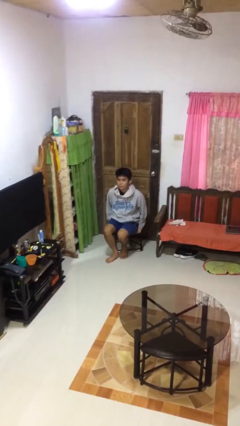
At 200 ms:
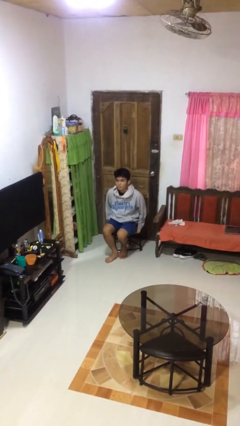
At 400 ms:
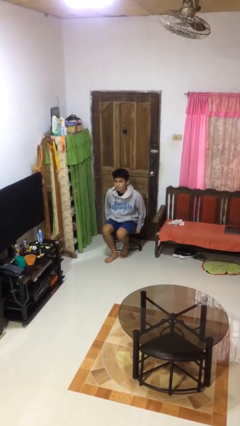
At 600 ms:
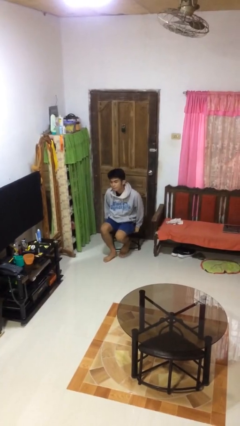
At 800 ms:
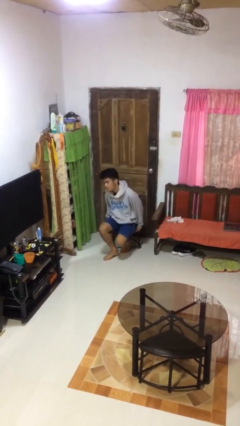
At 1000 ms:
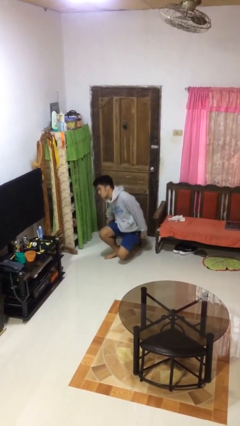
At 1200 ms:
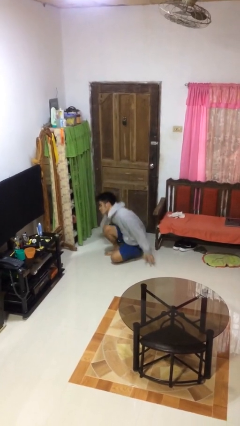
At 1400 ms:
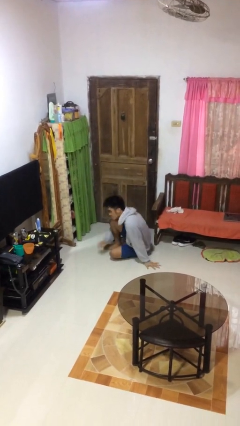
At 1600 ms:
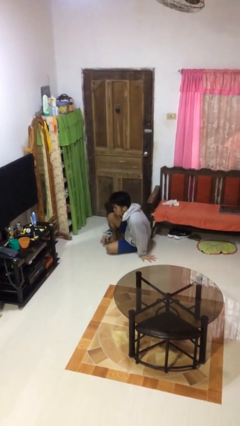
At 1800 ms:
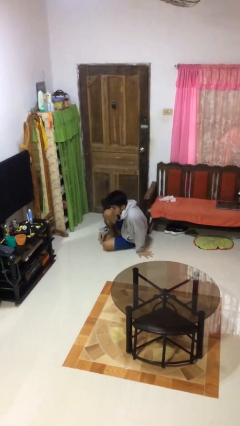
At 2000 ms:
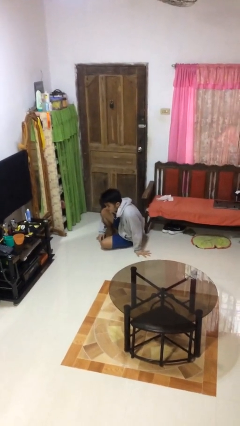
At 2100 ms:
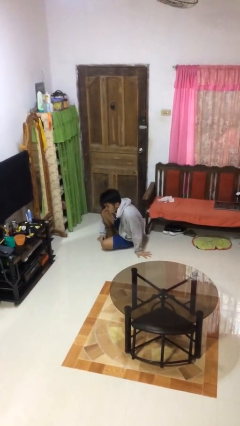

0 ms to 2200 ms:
person falls from chair

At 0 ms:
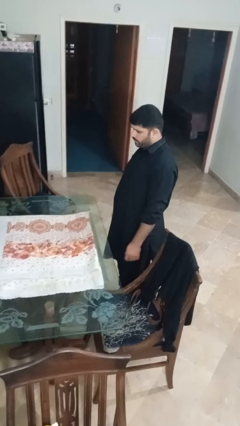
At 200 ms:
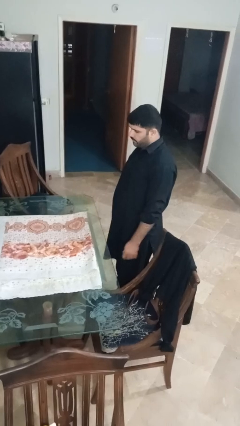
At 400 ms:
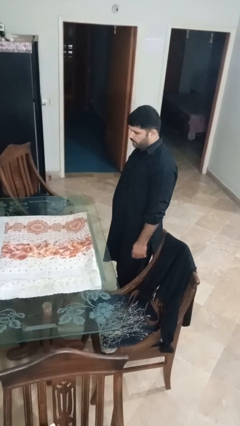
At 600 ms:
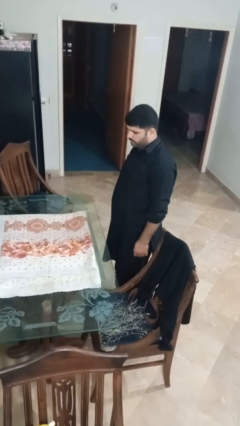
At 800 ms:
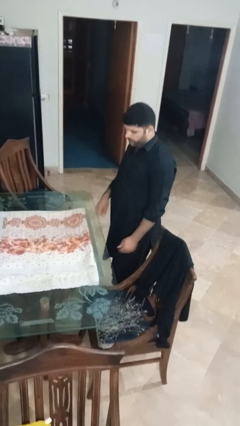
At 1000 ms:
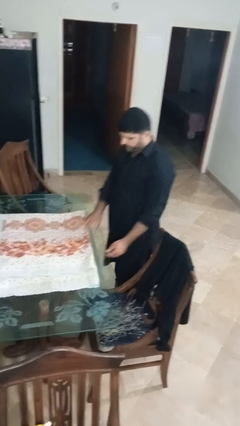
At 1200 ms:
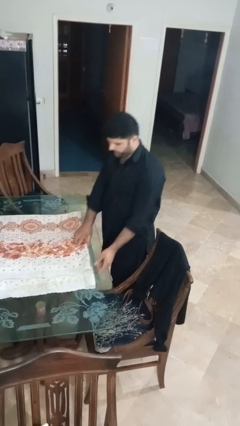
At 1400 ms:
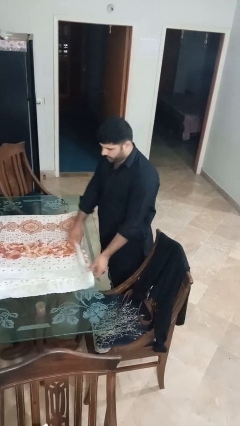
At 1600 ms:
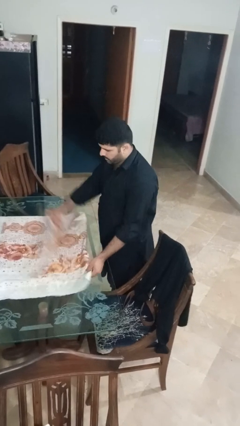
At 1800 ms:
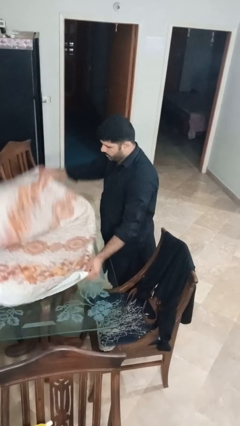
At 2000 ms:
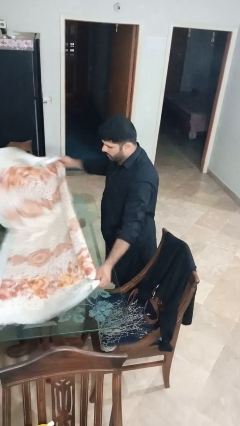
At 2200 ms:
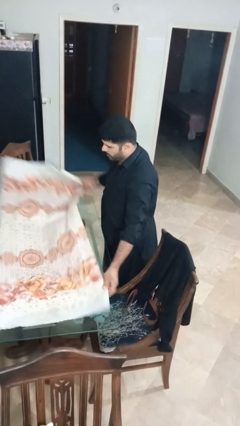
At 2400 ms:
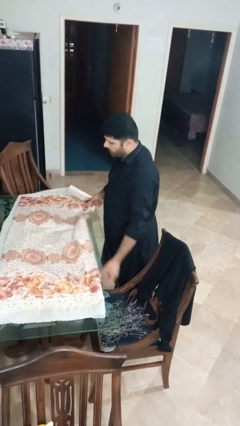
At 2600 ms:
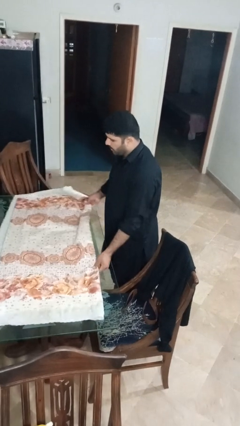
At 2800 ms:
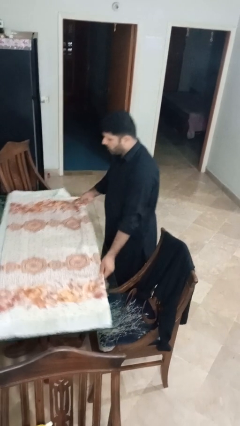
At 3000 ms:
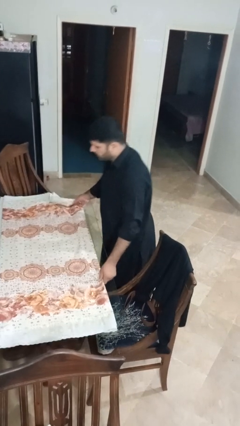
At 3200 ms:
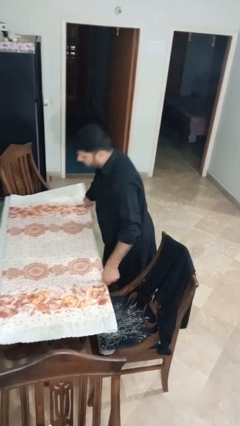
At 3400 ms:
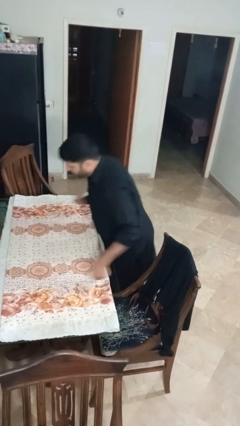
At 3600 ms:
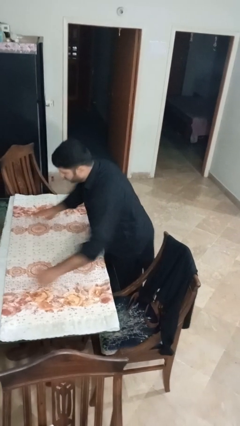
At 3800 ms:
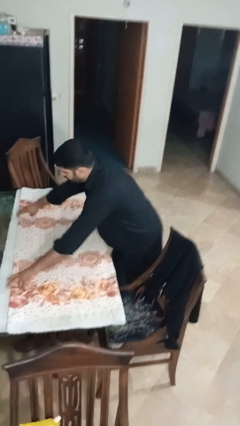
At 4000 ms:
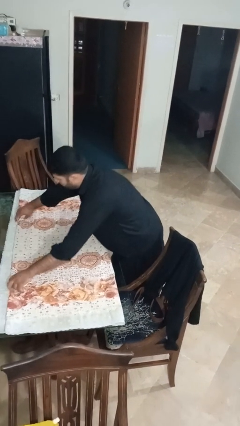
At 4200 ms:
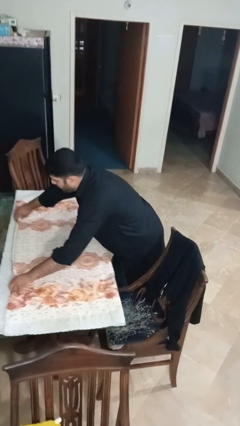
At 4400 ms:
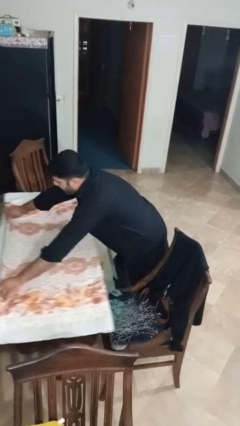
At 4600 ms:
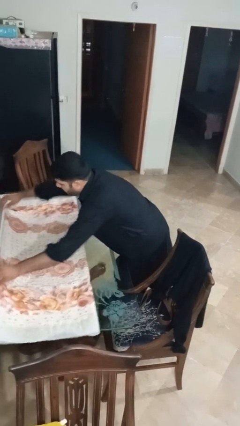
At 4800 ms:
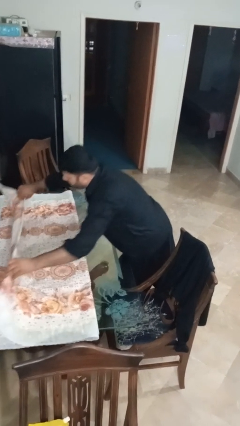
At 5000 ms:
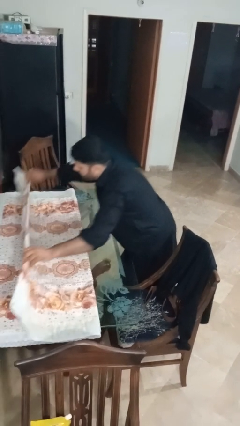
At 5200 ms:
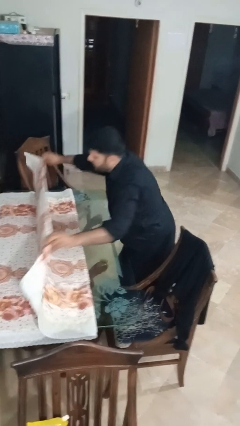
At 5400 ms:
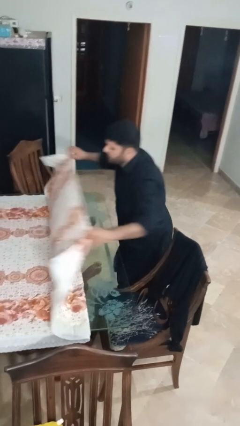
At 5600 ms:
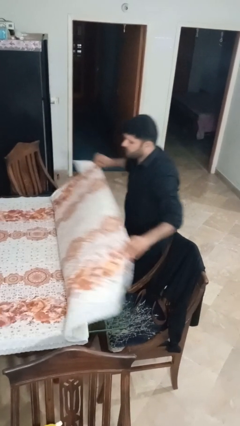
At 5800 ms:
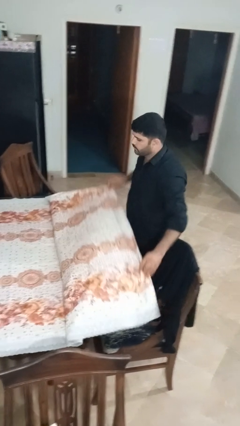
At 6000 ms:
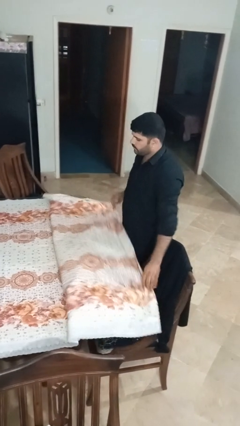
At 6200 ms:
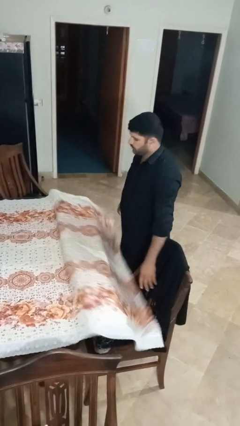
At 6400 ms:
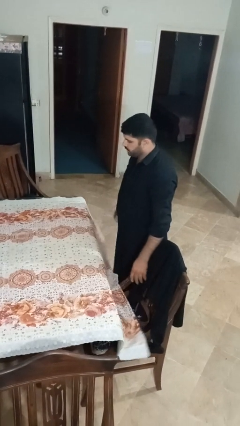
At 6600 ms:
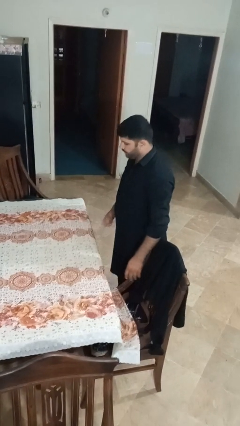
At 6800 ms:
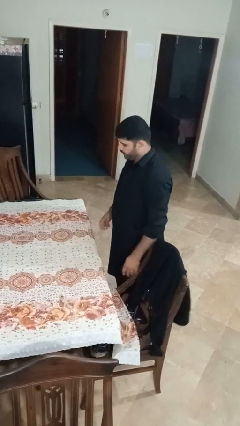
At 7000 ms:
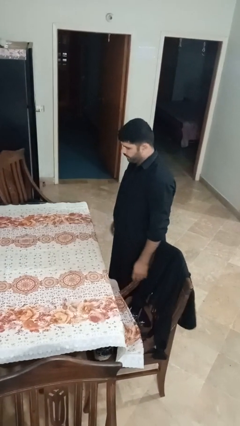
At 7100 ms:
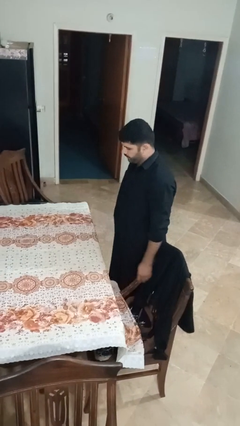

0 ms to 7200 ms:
person spreads tablecloth

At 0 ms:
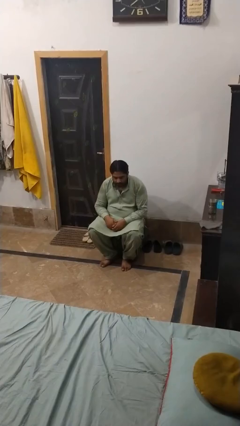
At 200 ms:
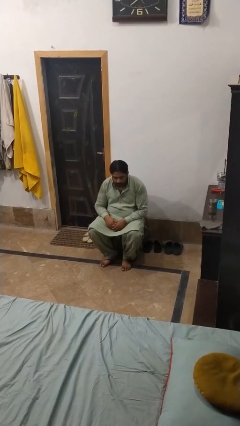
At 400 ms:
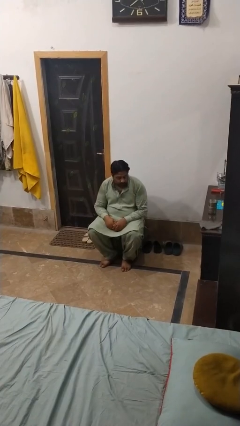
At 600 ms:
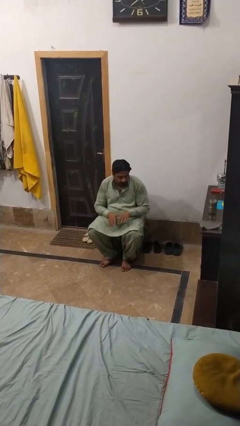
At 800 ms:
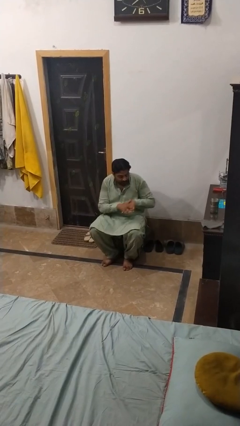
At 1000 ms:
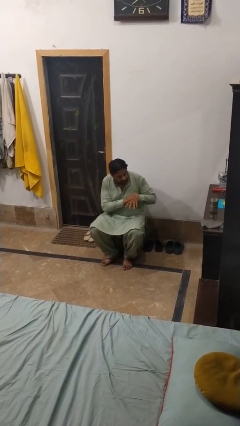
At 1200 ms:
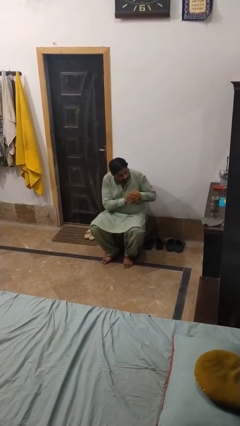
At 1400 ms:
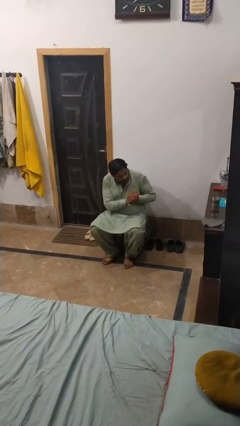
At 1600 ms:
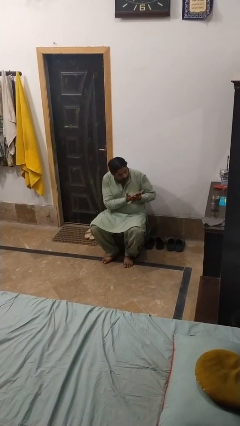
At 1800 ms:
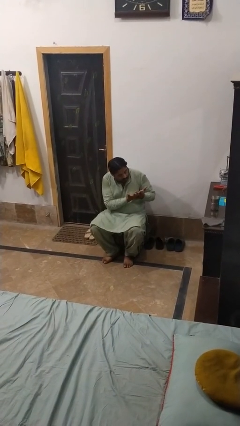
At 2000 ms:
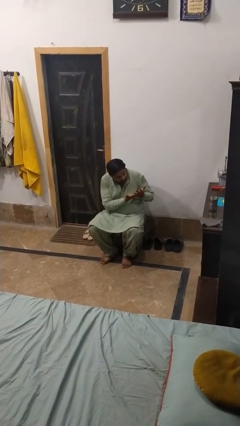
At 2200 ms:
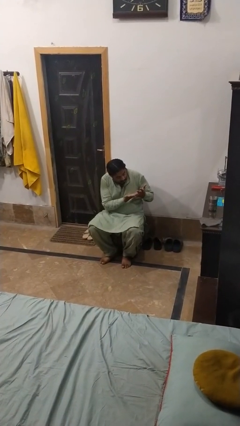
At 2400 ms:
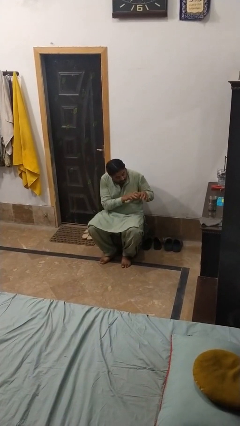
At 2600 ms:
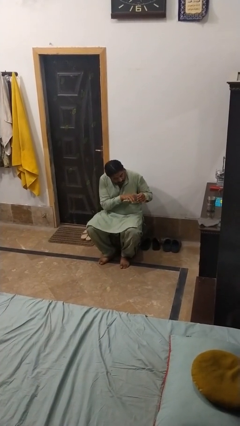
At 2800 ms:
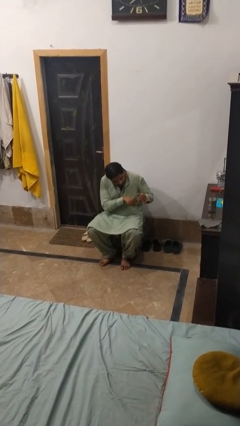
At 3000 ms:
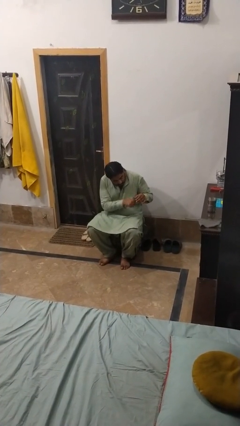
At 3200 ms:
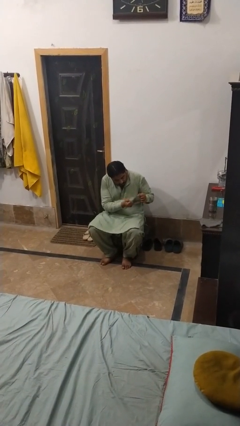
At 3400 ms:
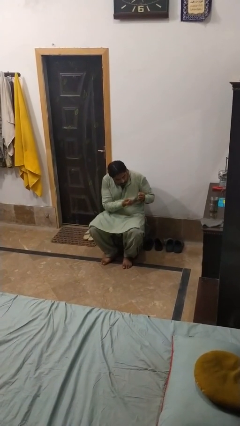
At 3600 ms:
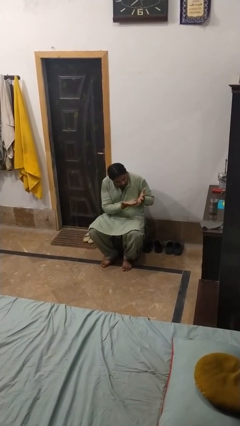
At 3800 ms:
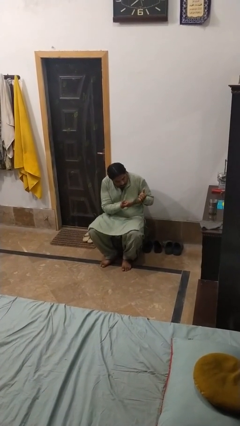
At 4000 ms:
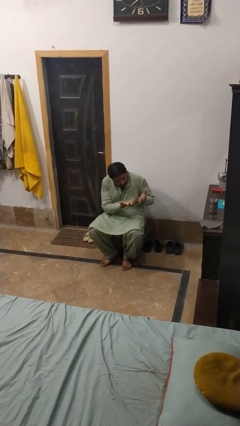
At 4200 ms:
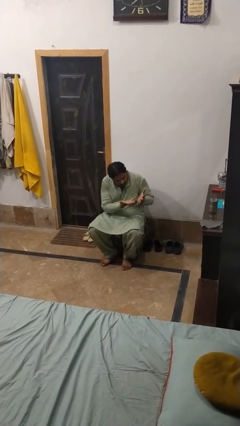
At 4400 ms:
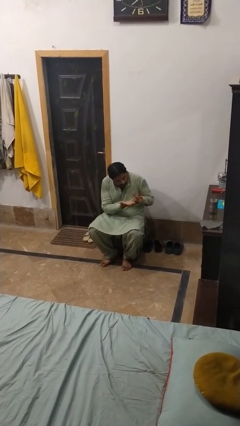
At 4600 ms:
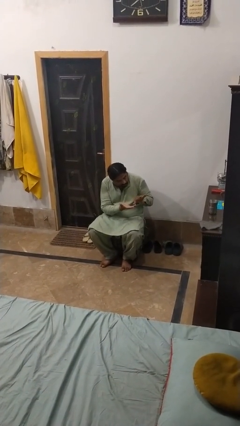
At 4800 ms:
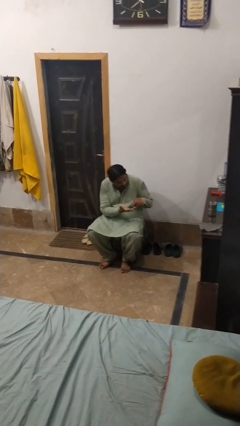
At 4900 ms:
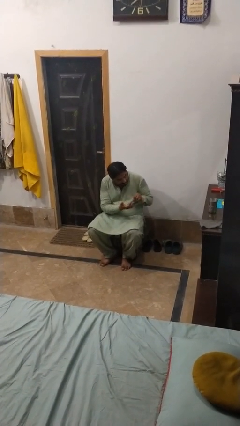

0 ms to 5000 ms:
person looks at hands in lap

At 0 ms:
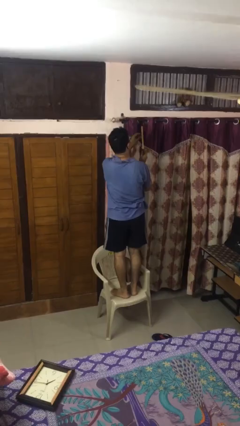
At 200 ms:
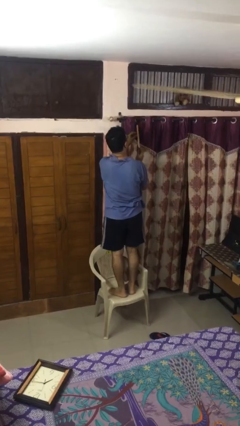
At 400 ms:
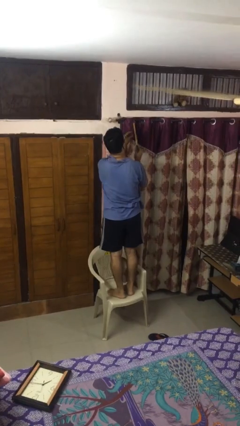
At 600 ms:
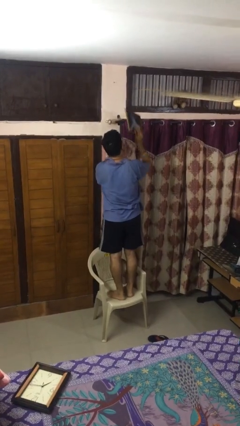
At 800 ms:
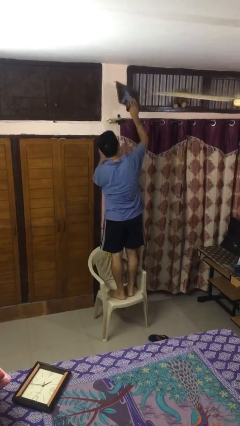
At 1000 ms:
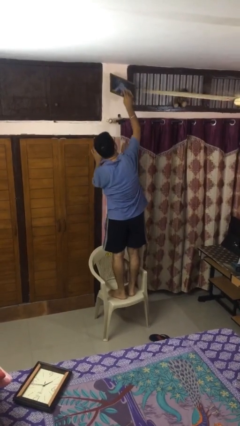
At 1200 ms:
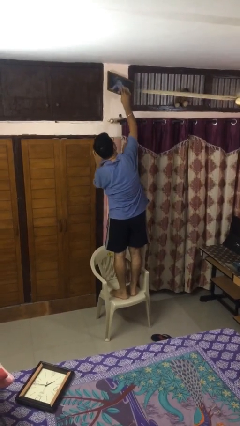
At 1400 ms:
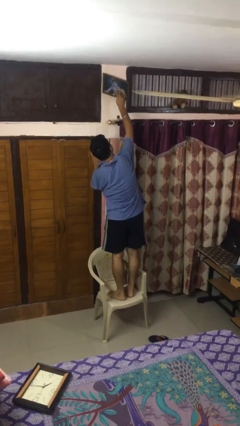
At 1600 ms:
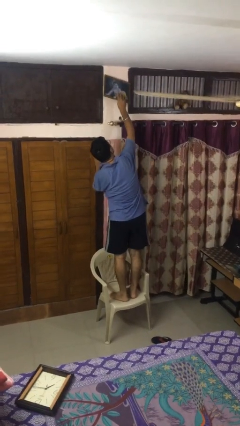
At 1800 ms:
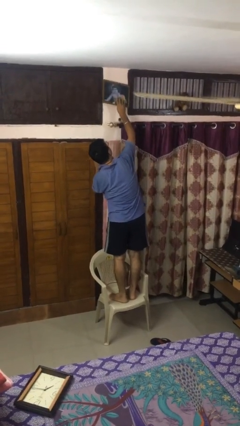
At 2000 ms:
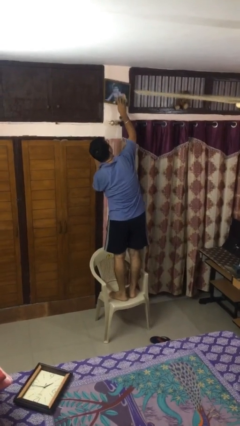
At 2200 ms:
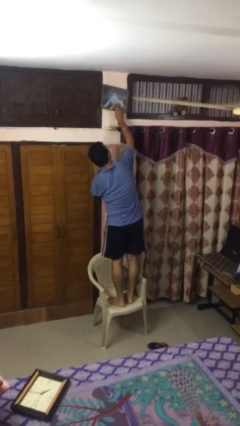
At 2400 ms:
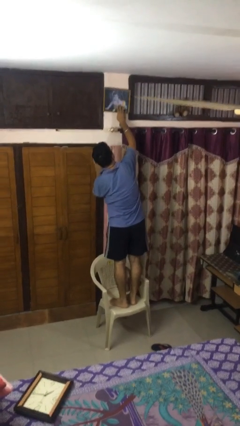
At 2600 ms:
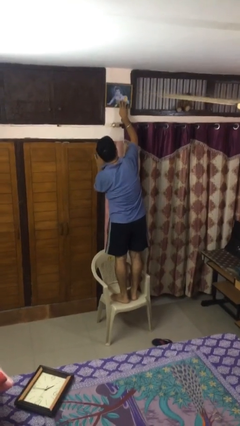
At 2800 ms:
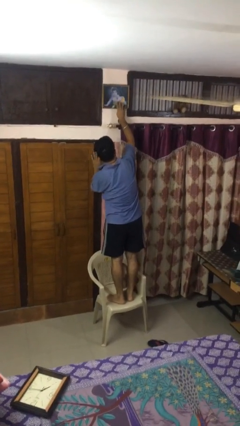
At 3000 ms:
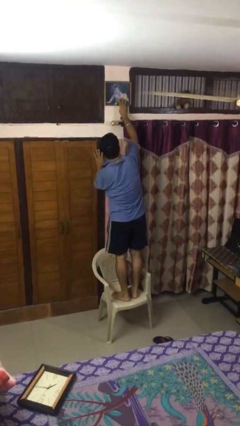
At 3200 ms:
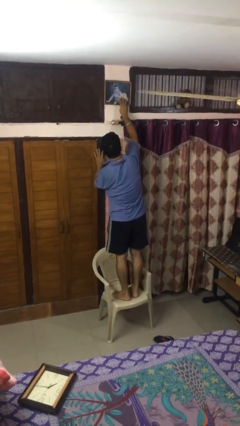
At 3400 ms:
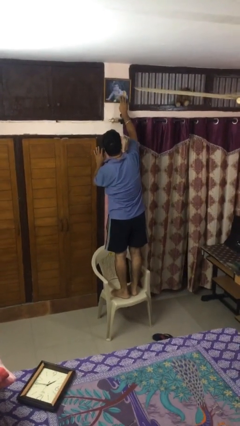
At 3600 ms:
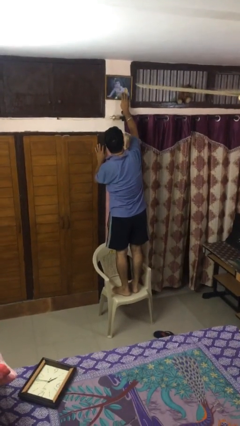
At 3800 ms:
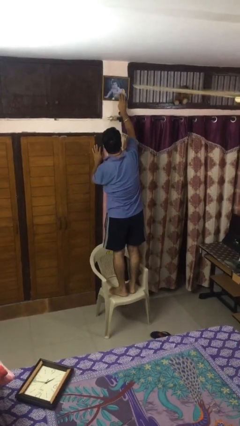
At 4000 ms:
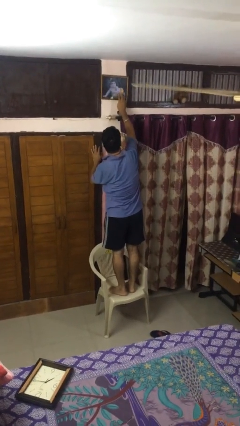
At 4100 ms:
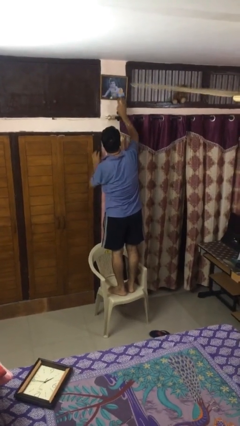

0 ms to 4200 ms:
person puts up picture frame
